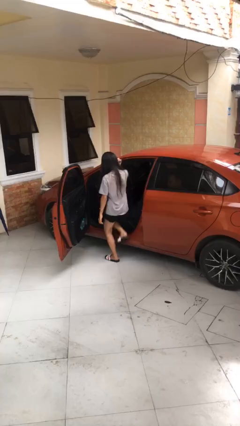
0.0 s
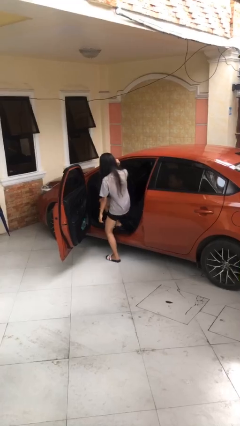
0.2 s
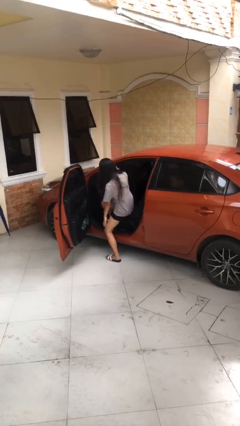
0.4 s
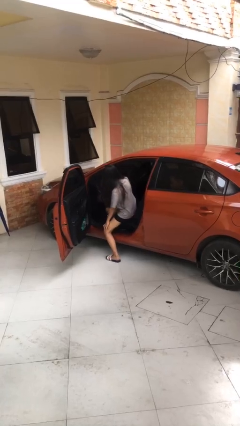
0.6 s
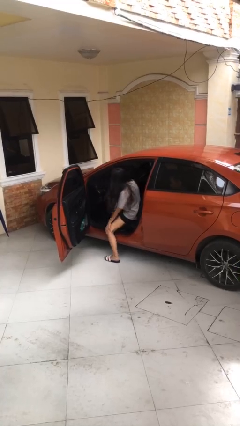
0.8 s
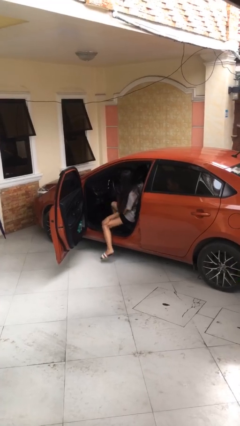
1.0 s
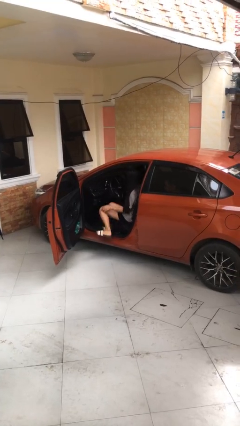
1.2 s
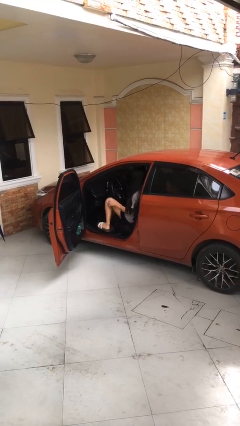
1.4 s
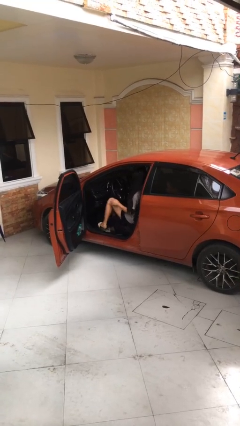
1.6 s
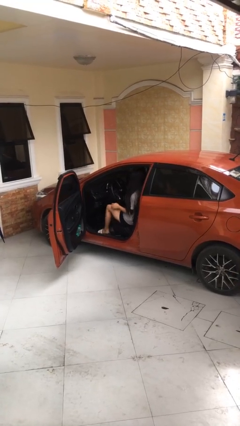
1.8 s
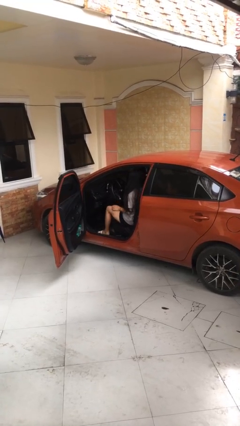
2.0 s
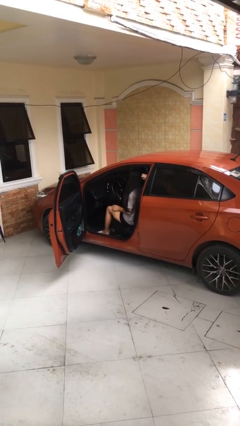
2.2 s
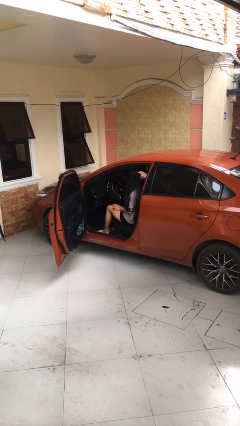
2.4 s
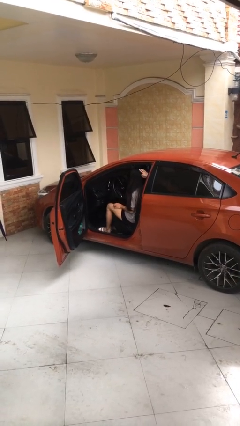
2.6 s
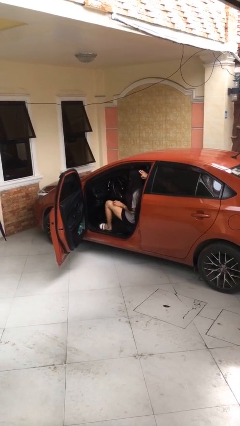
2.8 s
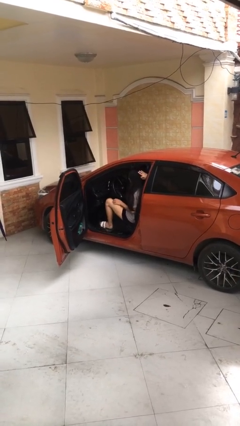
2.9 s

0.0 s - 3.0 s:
person enters car

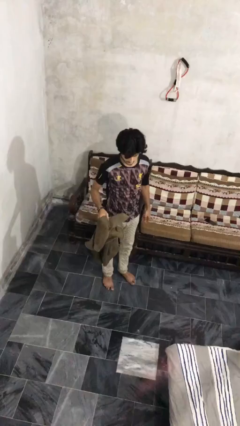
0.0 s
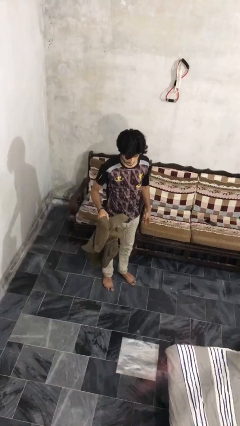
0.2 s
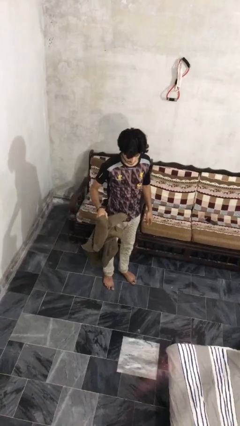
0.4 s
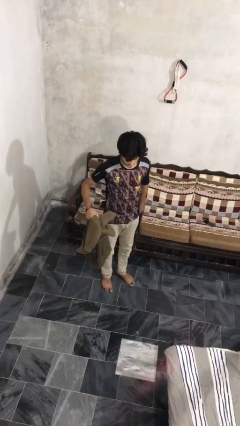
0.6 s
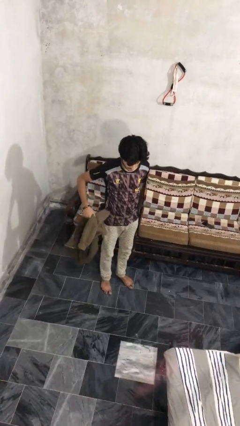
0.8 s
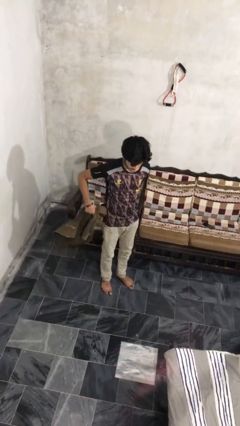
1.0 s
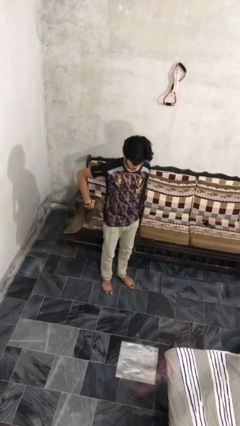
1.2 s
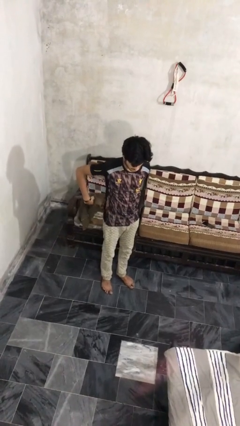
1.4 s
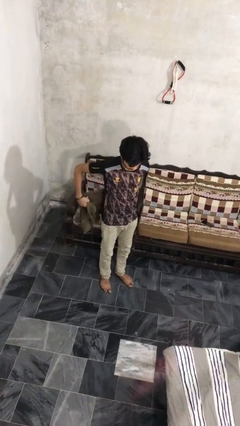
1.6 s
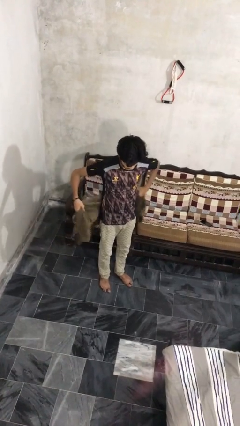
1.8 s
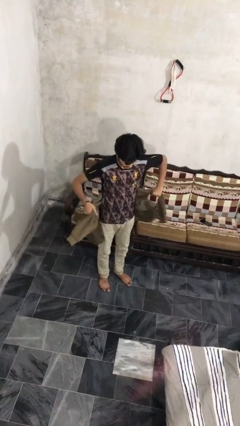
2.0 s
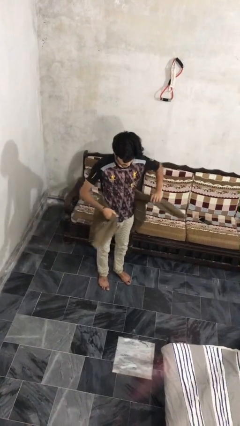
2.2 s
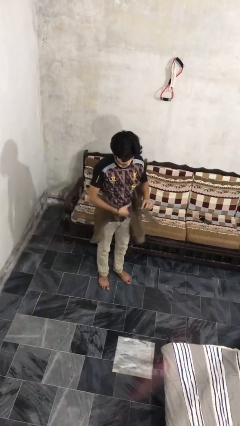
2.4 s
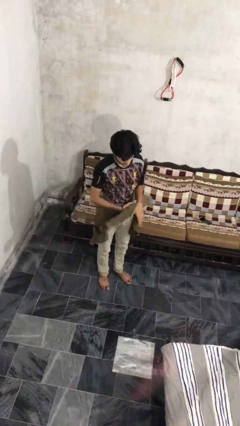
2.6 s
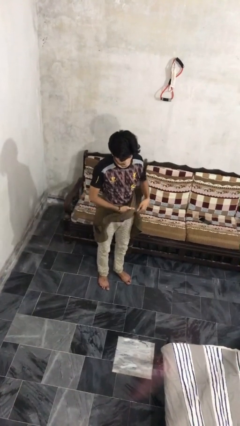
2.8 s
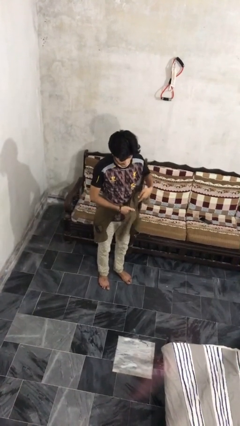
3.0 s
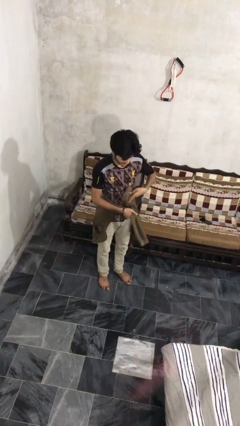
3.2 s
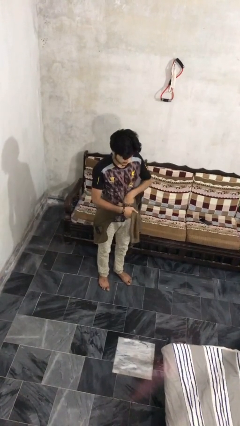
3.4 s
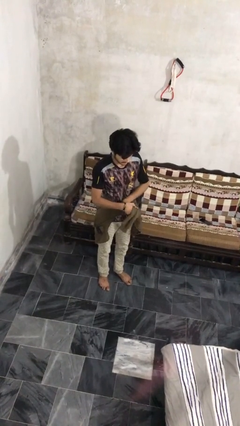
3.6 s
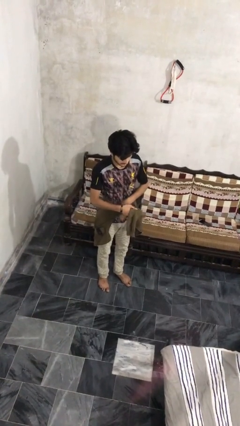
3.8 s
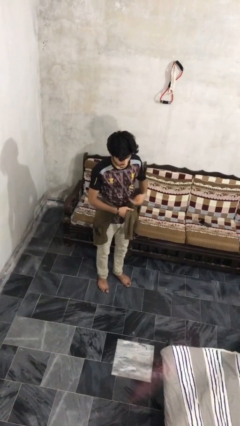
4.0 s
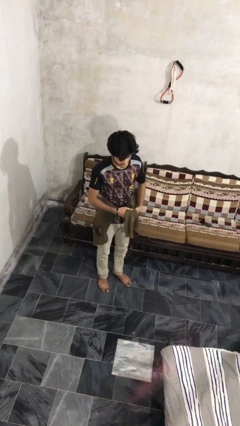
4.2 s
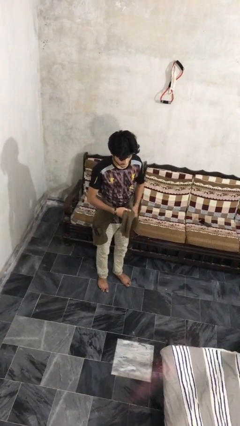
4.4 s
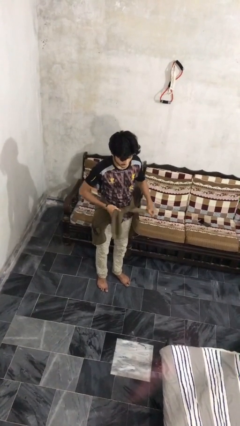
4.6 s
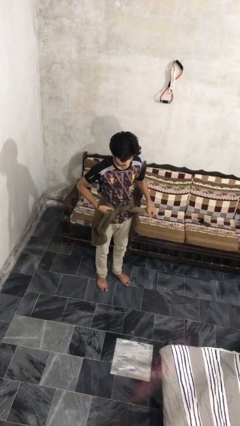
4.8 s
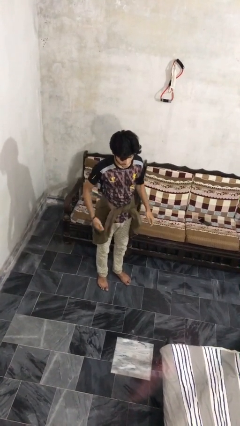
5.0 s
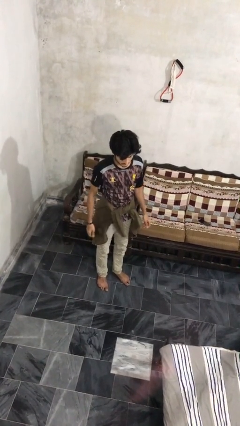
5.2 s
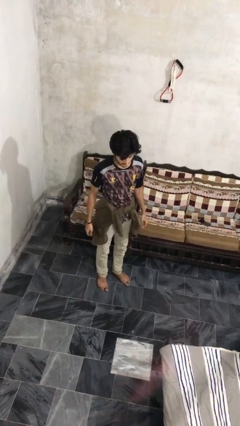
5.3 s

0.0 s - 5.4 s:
person ties jacket around waist

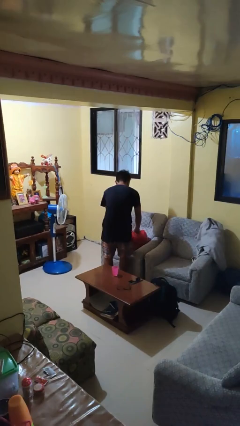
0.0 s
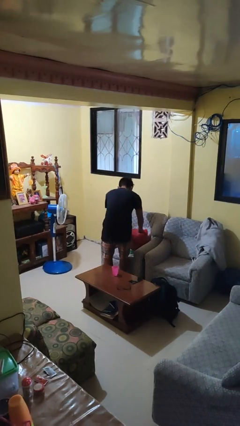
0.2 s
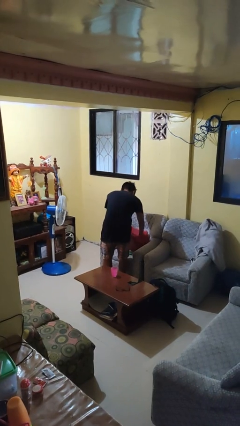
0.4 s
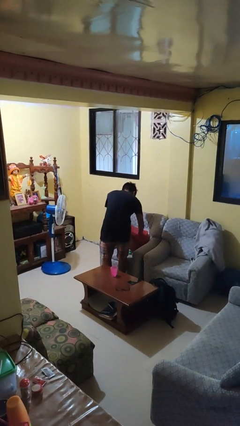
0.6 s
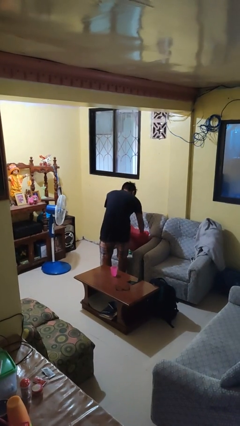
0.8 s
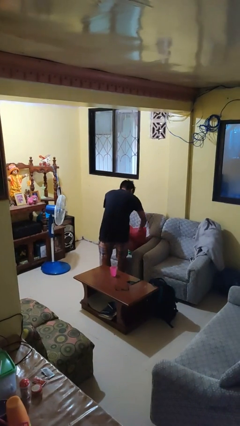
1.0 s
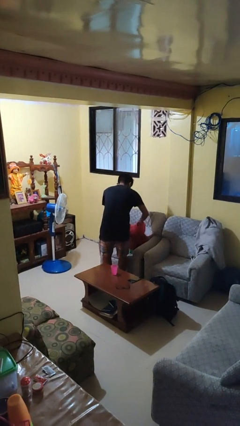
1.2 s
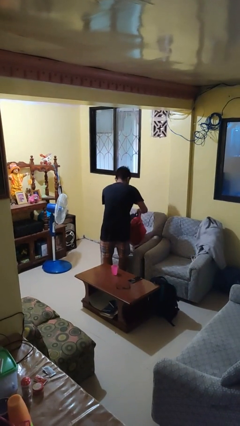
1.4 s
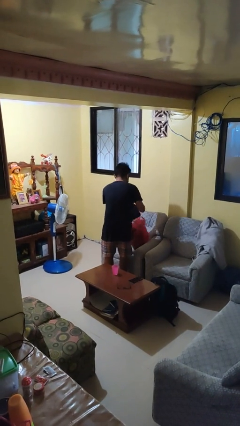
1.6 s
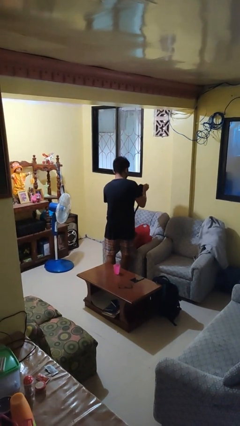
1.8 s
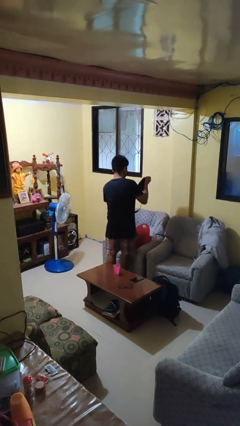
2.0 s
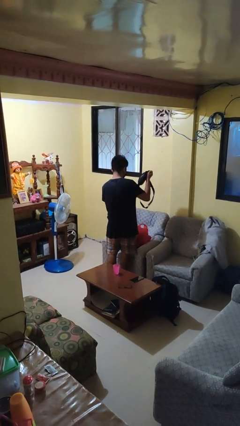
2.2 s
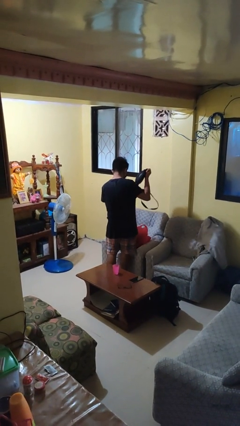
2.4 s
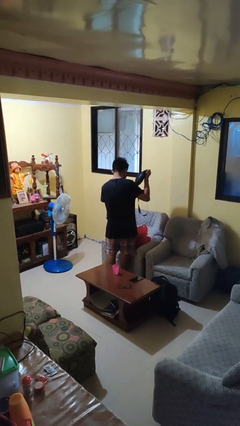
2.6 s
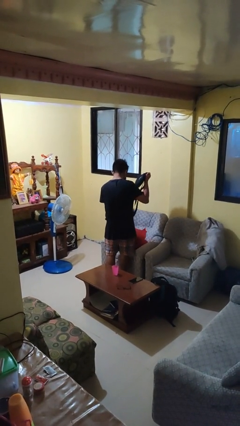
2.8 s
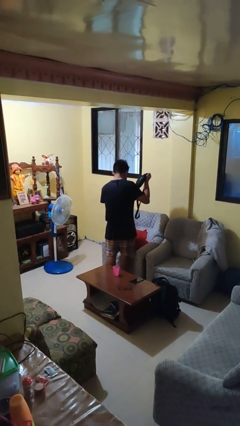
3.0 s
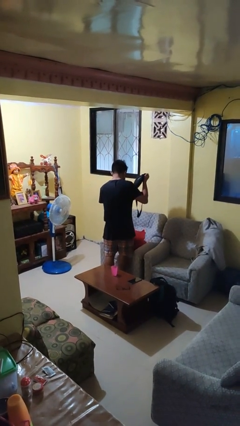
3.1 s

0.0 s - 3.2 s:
person takes object from bag

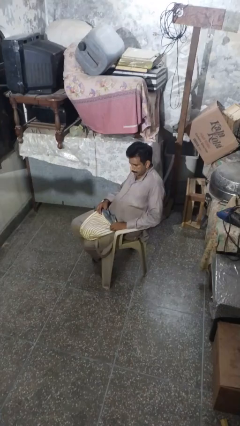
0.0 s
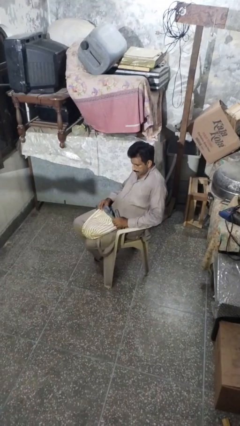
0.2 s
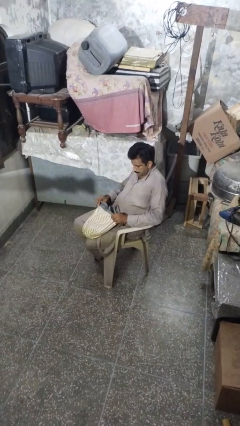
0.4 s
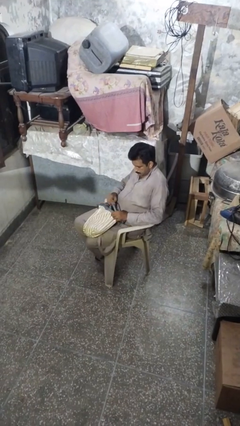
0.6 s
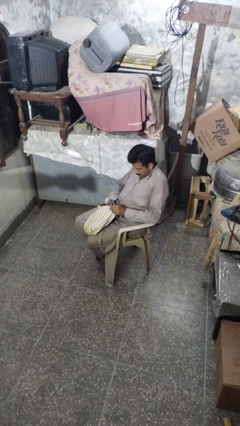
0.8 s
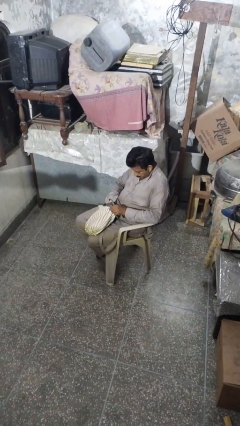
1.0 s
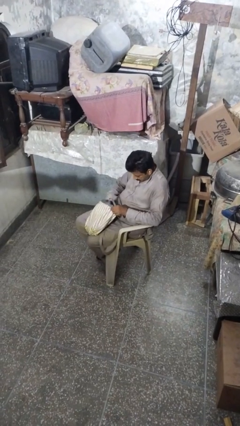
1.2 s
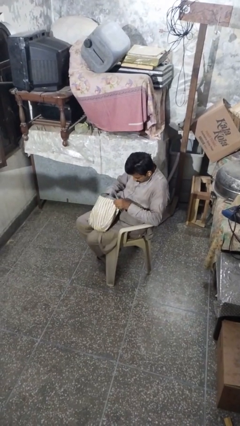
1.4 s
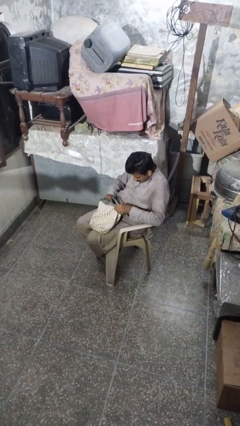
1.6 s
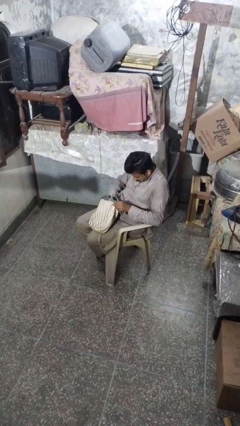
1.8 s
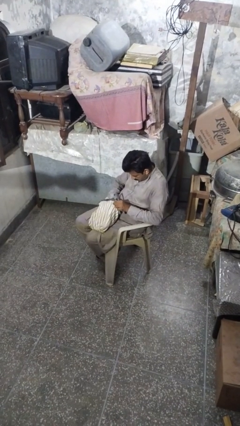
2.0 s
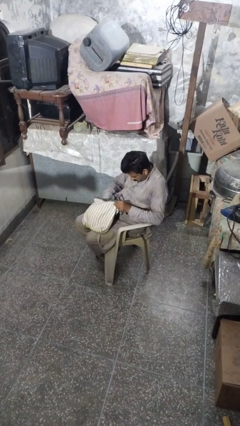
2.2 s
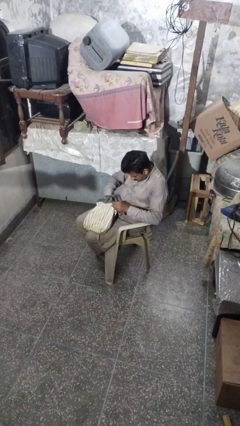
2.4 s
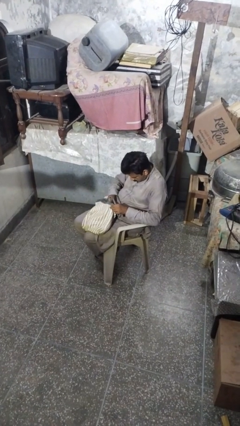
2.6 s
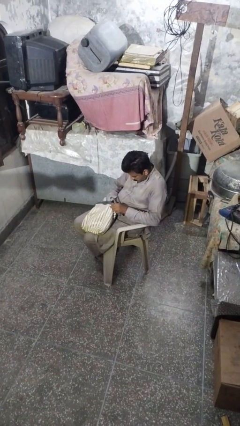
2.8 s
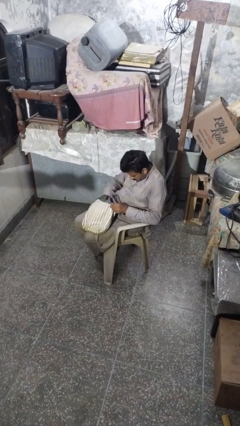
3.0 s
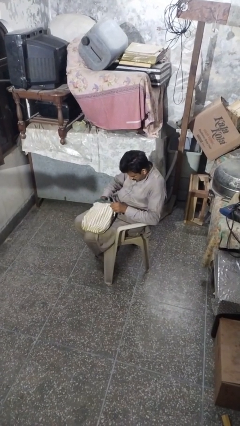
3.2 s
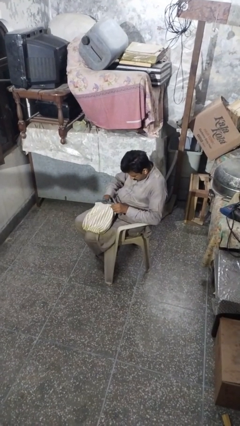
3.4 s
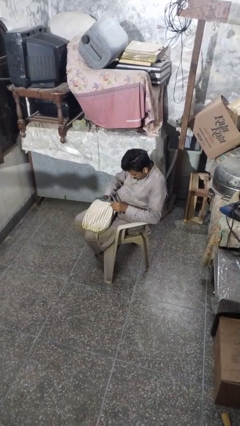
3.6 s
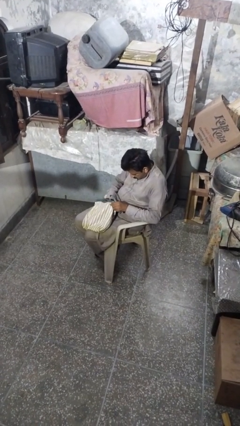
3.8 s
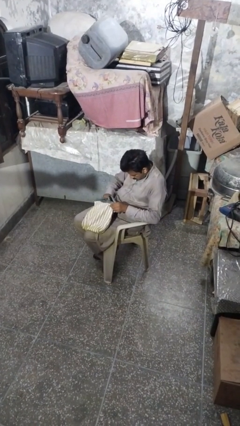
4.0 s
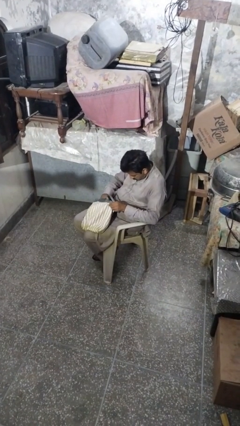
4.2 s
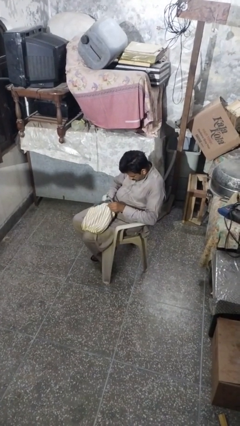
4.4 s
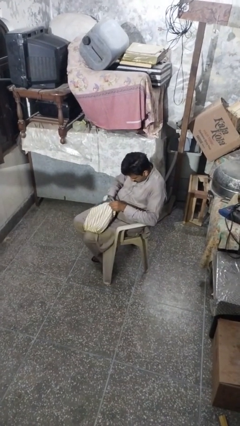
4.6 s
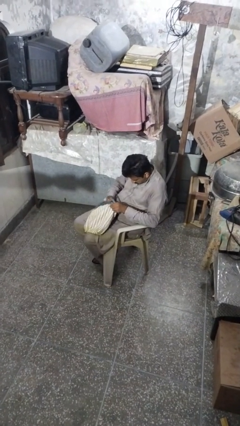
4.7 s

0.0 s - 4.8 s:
person searches in purse

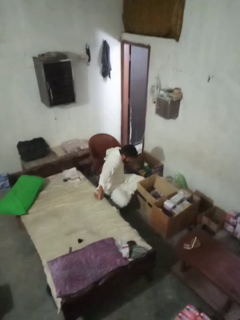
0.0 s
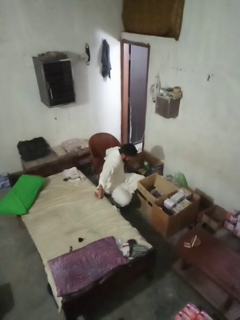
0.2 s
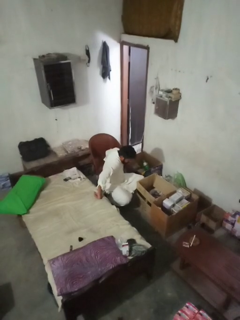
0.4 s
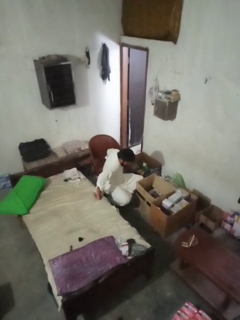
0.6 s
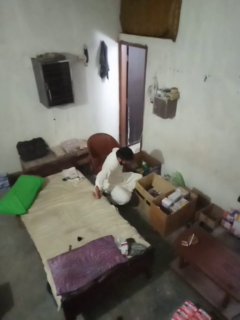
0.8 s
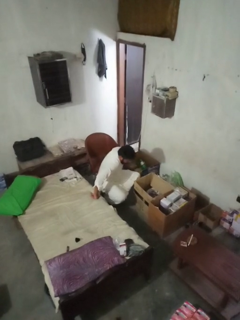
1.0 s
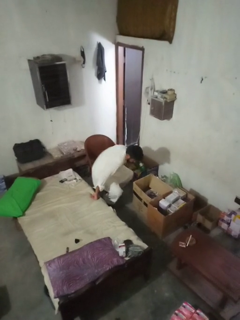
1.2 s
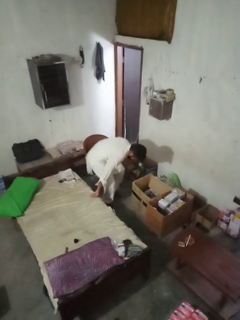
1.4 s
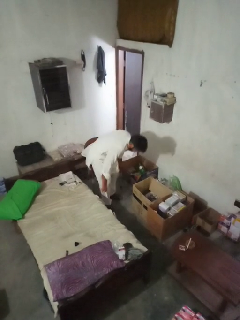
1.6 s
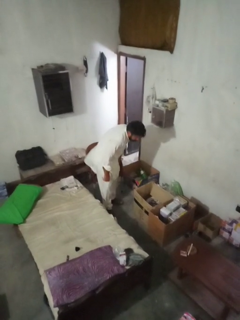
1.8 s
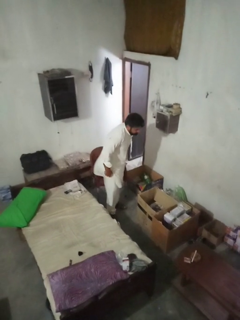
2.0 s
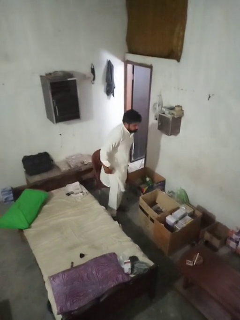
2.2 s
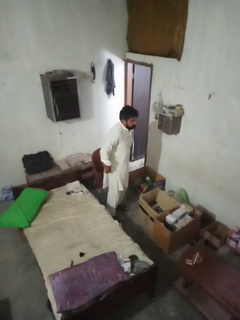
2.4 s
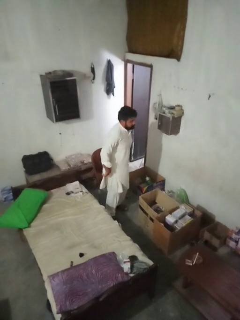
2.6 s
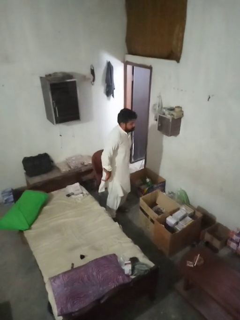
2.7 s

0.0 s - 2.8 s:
person stands up from floor
